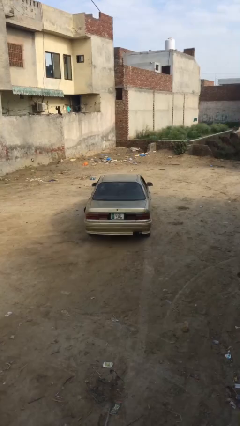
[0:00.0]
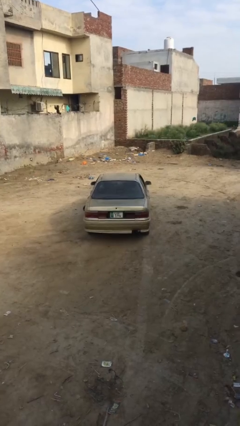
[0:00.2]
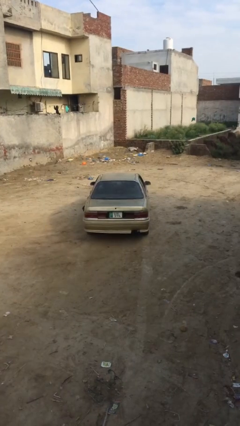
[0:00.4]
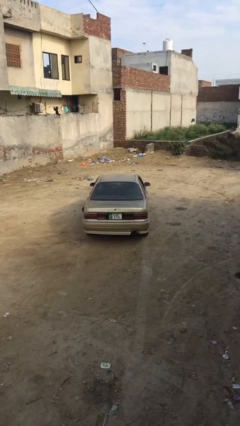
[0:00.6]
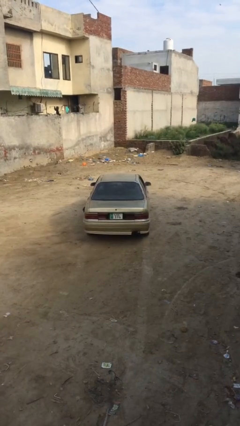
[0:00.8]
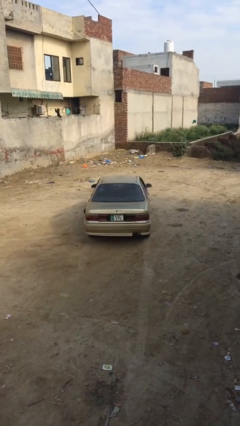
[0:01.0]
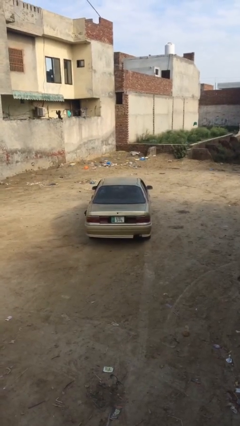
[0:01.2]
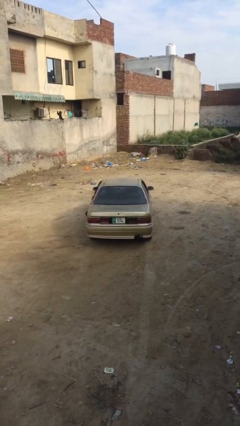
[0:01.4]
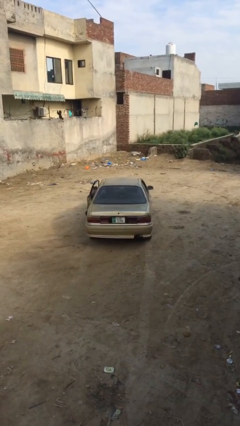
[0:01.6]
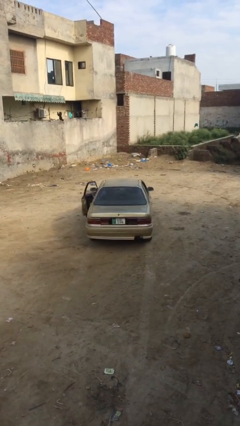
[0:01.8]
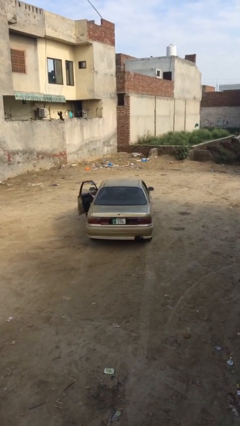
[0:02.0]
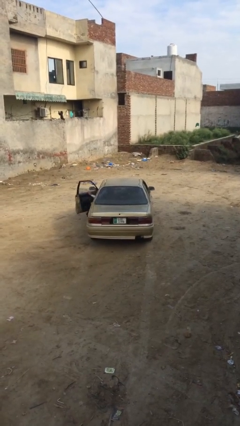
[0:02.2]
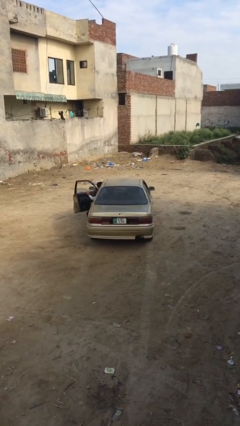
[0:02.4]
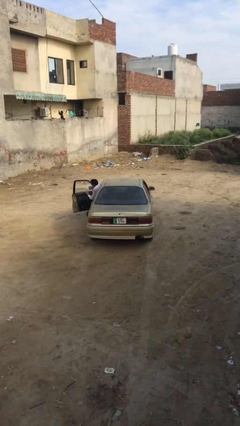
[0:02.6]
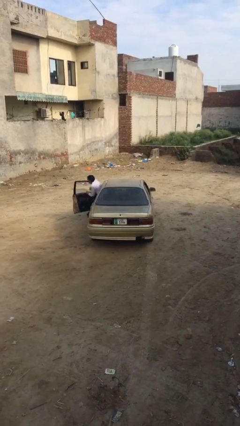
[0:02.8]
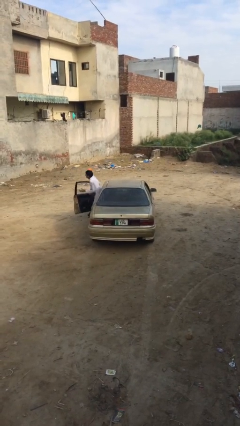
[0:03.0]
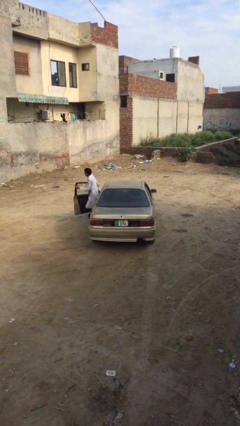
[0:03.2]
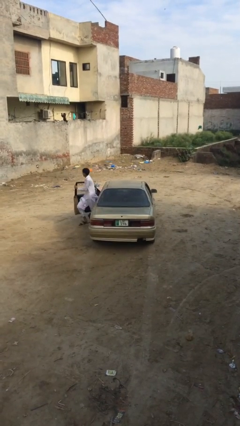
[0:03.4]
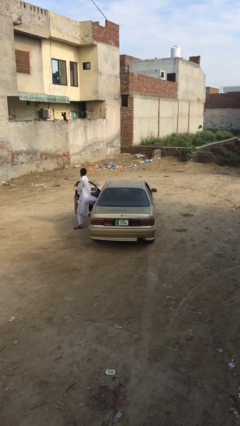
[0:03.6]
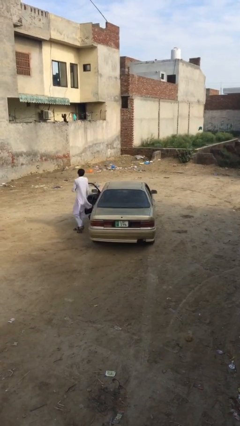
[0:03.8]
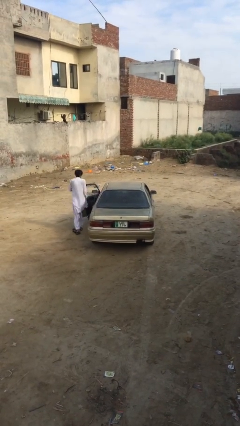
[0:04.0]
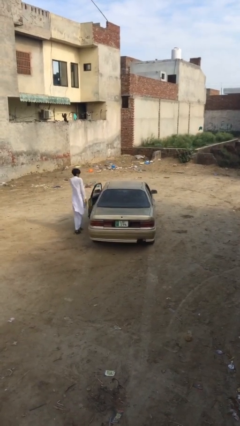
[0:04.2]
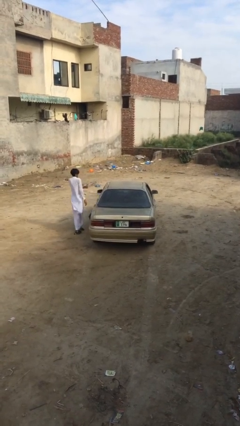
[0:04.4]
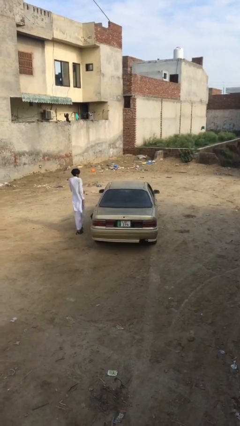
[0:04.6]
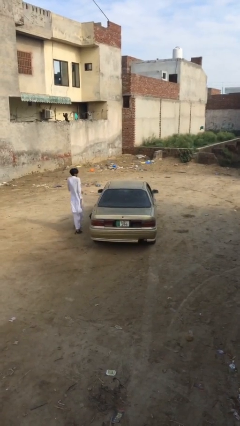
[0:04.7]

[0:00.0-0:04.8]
car drops off person

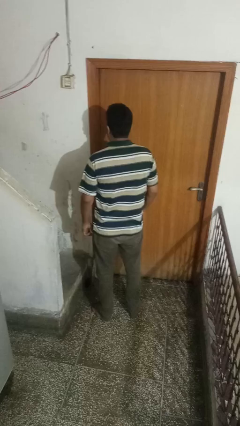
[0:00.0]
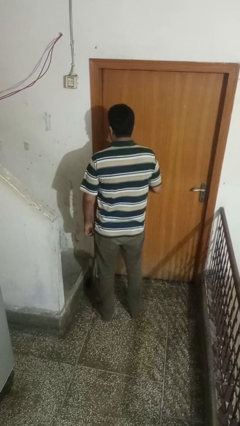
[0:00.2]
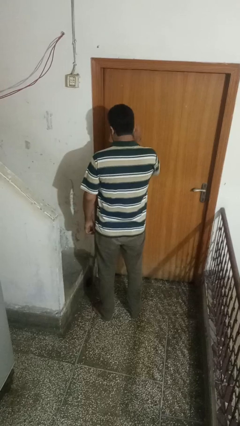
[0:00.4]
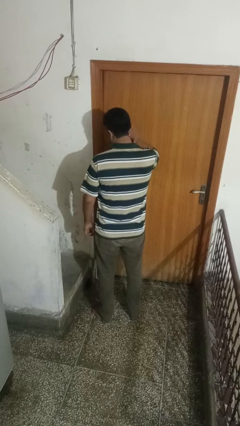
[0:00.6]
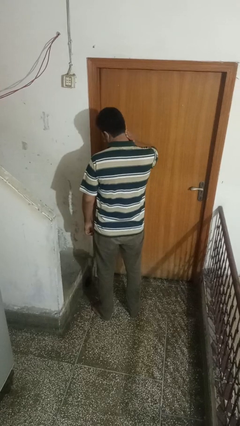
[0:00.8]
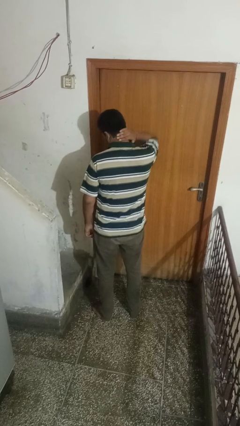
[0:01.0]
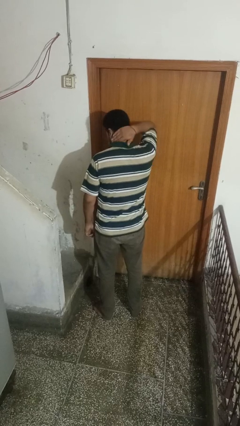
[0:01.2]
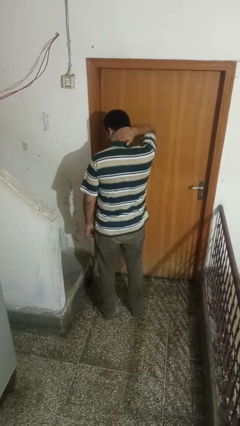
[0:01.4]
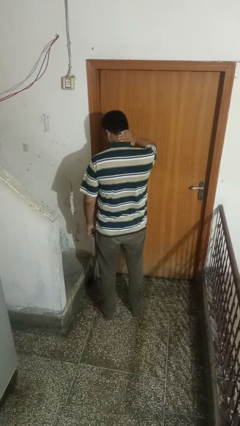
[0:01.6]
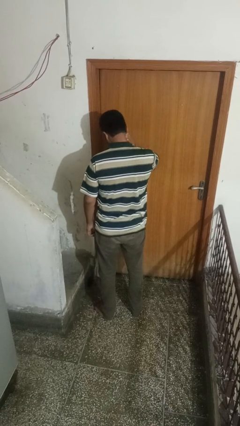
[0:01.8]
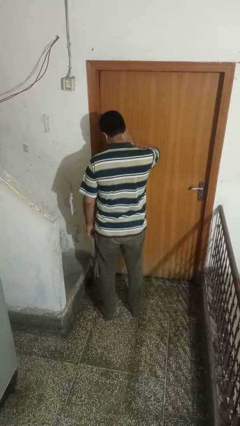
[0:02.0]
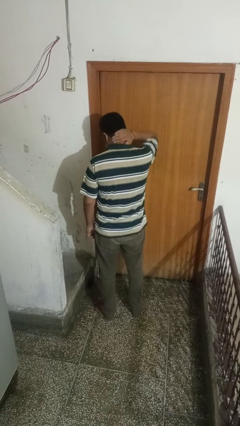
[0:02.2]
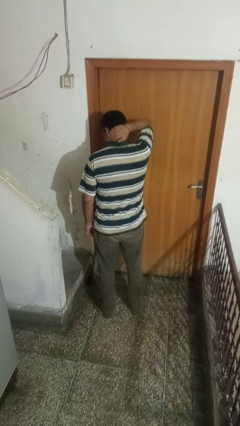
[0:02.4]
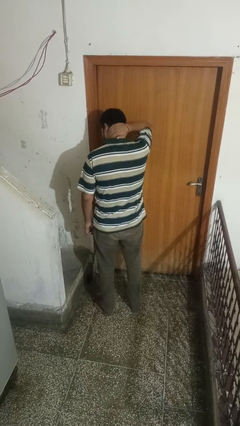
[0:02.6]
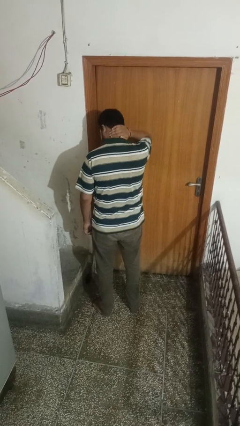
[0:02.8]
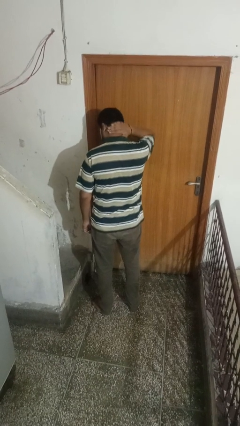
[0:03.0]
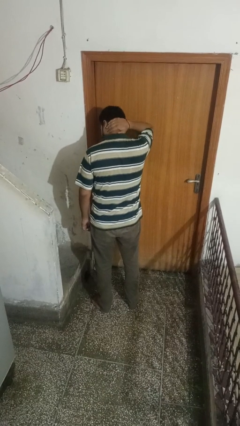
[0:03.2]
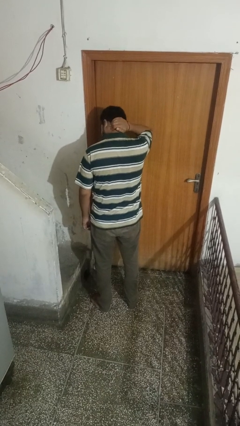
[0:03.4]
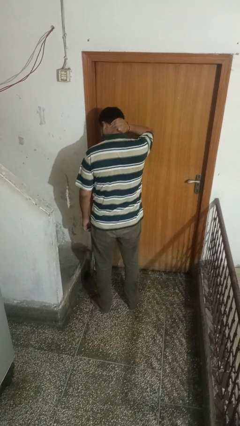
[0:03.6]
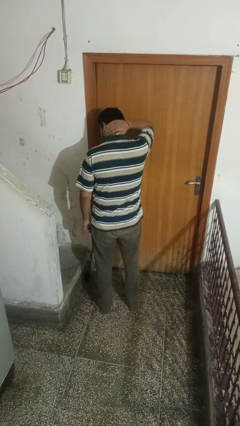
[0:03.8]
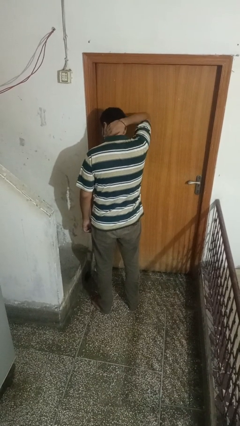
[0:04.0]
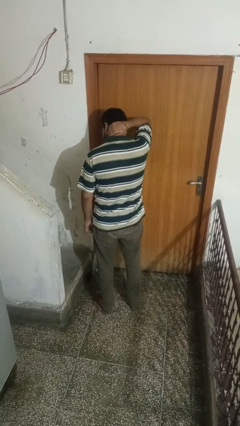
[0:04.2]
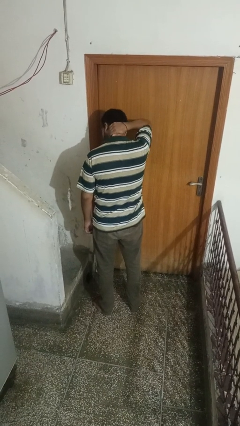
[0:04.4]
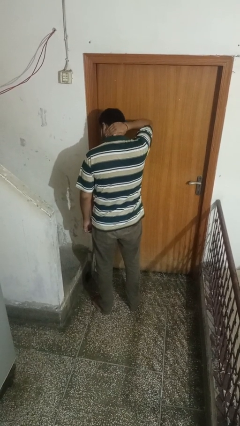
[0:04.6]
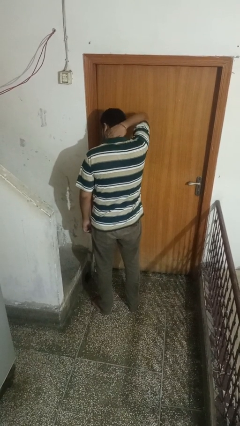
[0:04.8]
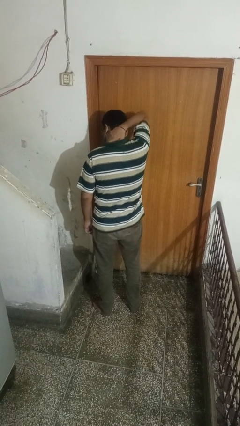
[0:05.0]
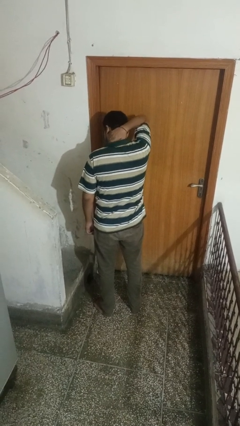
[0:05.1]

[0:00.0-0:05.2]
person rubs neck

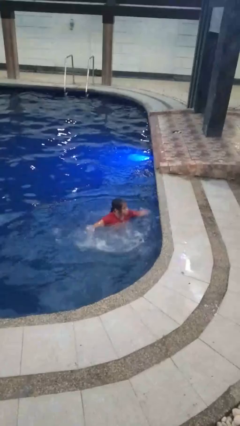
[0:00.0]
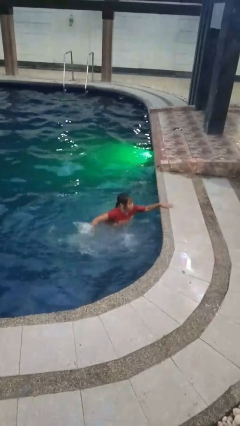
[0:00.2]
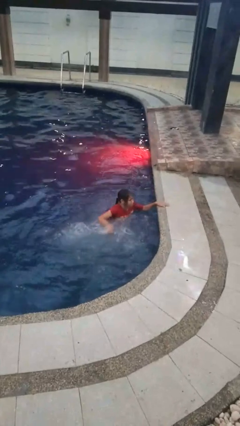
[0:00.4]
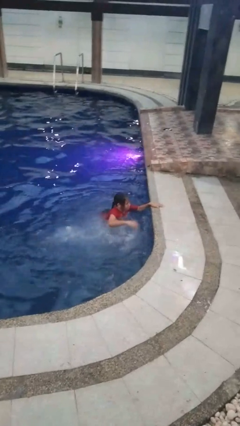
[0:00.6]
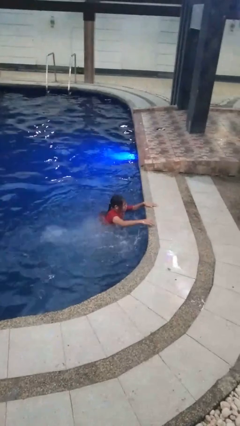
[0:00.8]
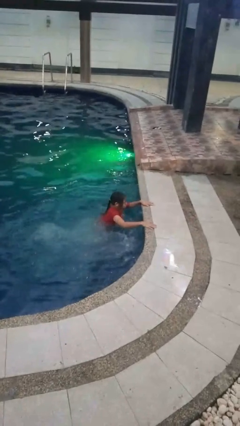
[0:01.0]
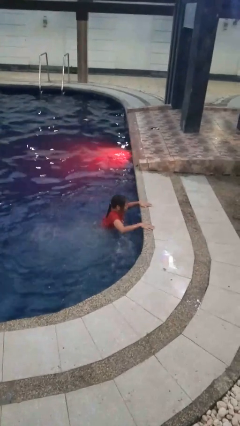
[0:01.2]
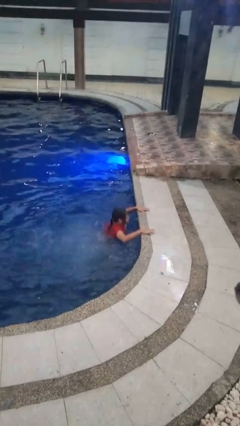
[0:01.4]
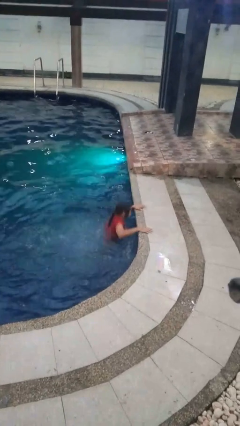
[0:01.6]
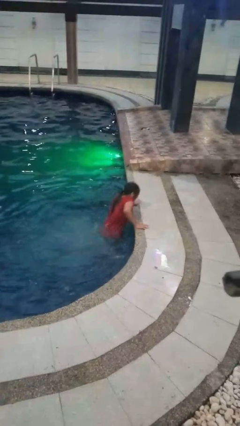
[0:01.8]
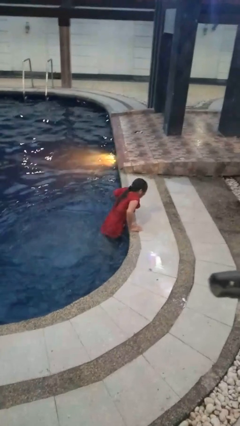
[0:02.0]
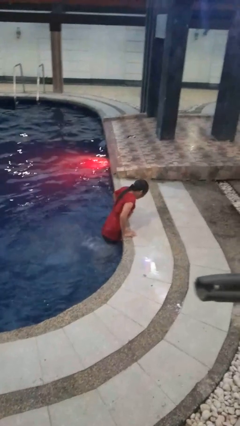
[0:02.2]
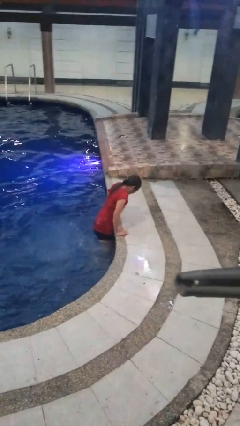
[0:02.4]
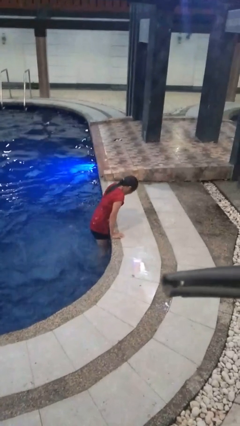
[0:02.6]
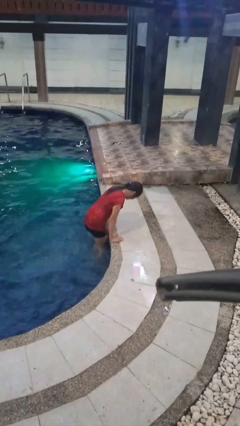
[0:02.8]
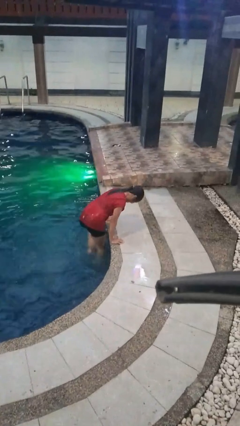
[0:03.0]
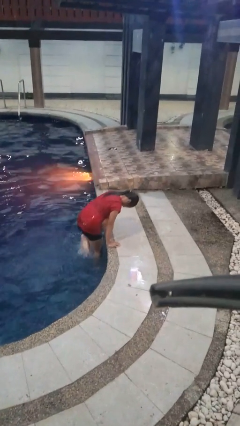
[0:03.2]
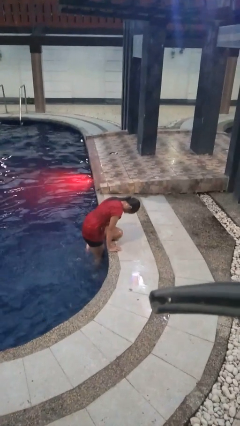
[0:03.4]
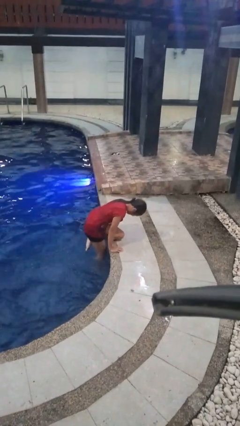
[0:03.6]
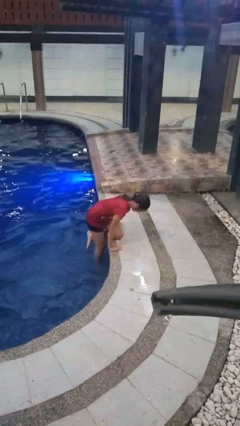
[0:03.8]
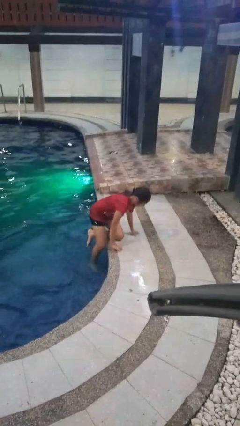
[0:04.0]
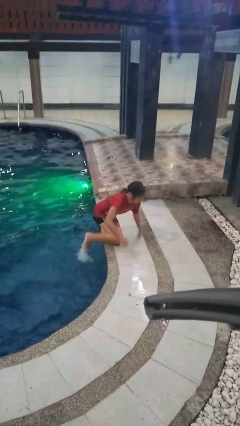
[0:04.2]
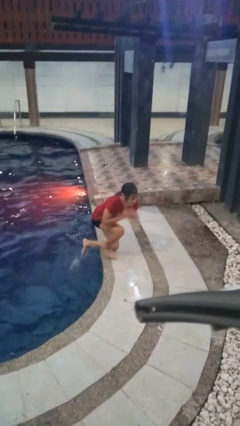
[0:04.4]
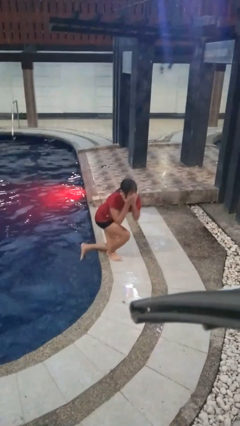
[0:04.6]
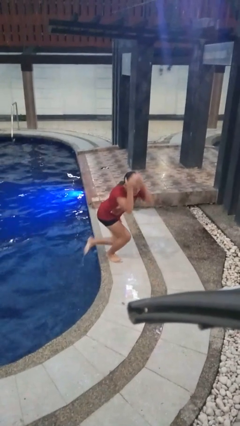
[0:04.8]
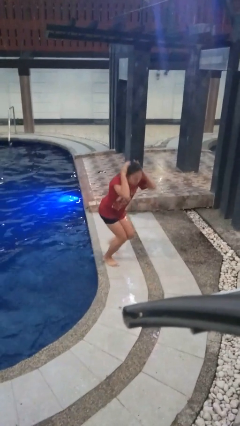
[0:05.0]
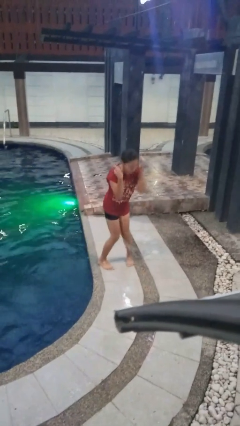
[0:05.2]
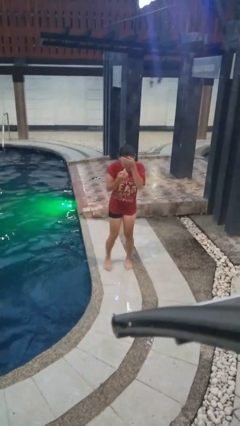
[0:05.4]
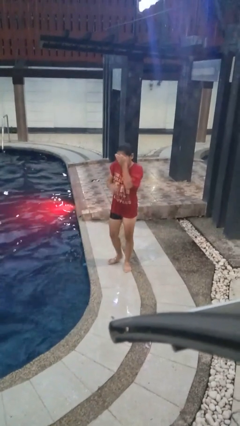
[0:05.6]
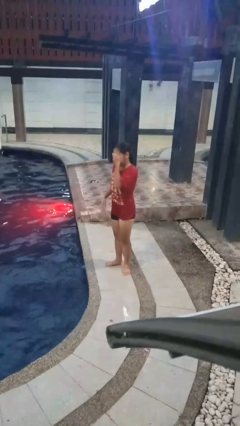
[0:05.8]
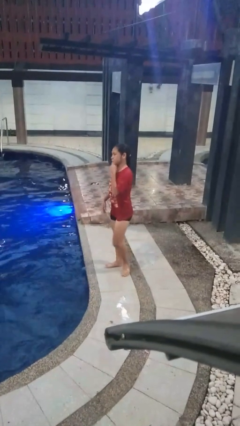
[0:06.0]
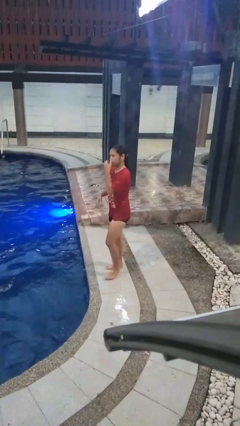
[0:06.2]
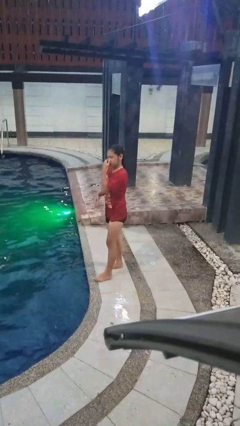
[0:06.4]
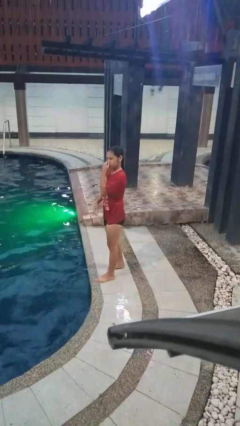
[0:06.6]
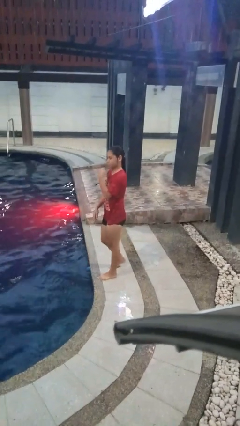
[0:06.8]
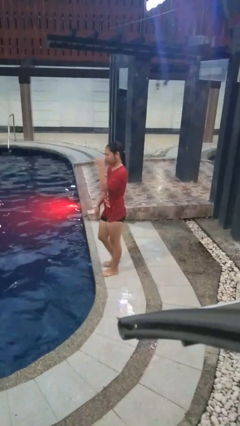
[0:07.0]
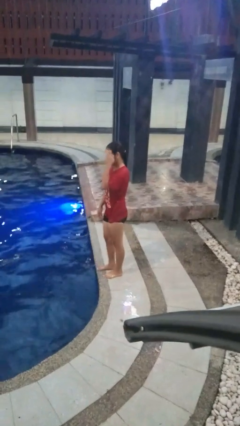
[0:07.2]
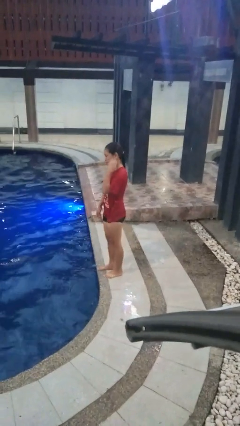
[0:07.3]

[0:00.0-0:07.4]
person exits pool
